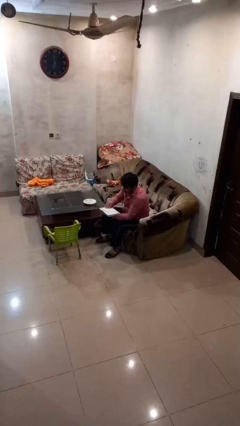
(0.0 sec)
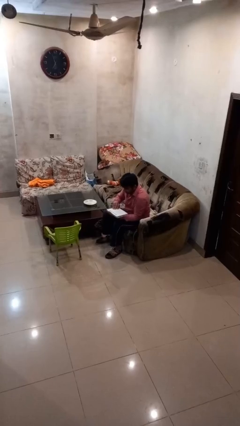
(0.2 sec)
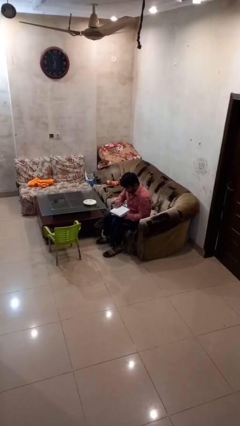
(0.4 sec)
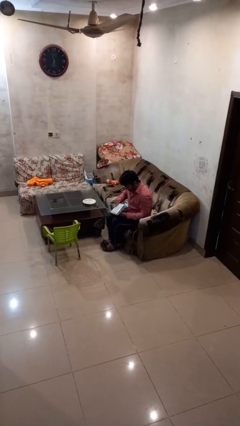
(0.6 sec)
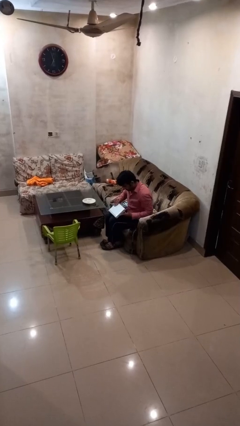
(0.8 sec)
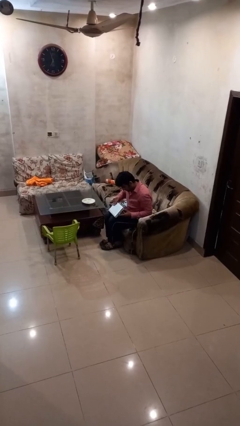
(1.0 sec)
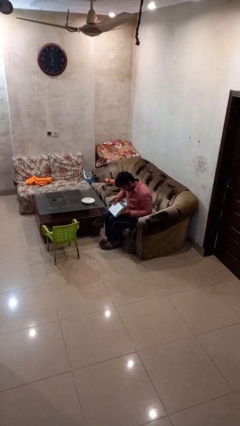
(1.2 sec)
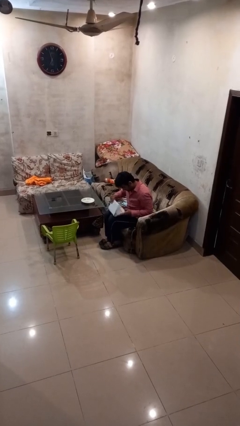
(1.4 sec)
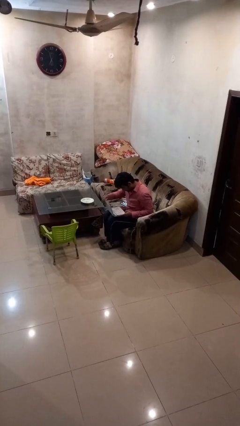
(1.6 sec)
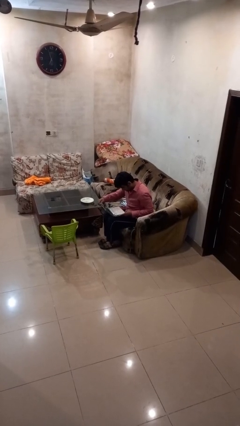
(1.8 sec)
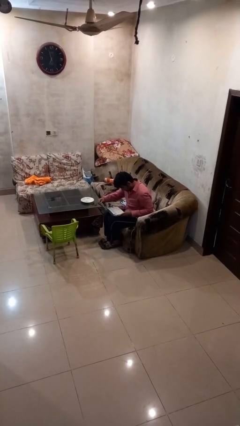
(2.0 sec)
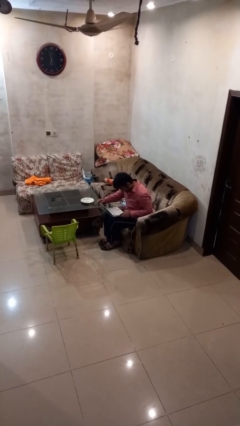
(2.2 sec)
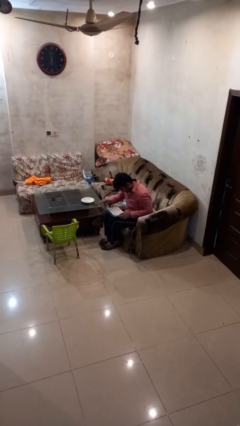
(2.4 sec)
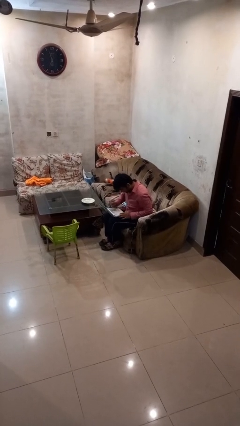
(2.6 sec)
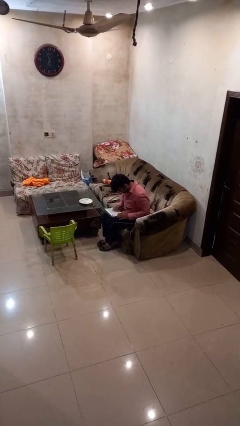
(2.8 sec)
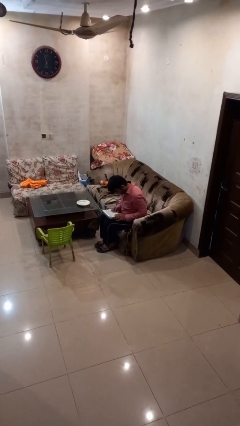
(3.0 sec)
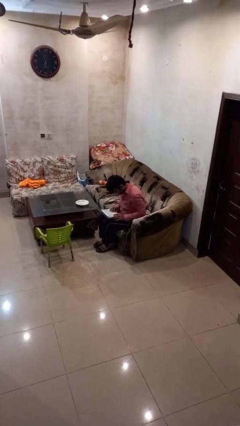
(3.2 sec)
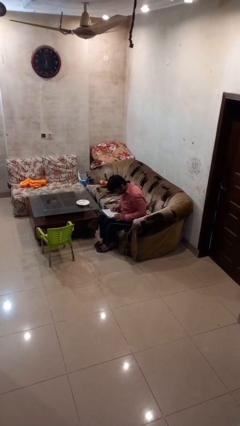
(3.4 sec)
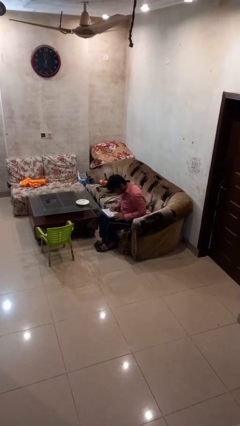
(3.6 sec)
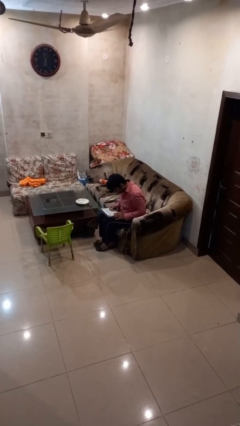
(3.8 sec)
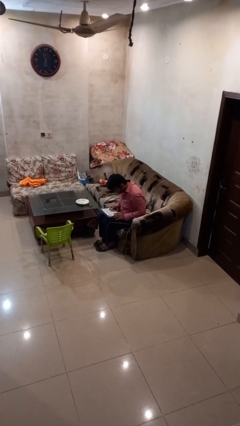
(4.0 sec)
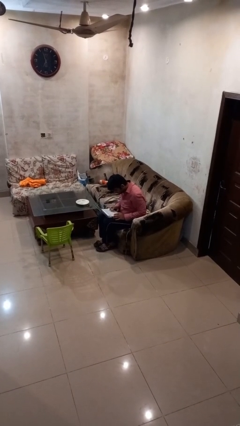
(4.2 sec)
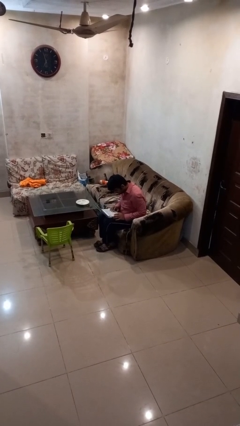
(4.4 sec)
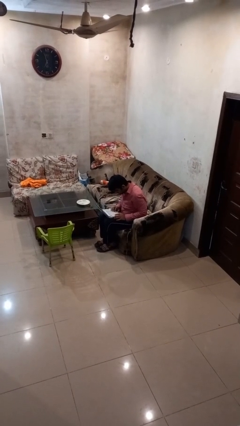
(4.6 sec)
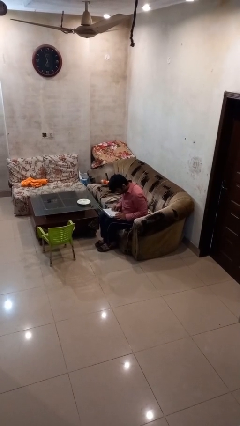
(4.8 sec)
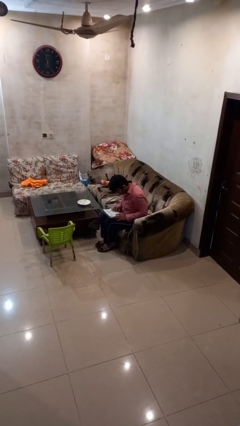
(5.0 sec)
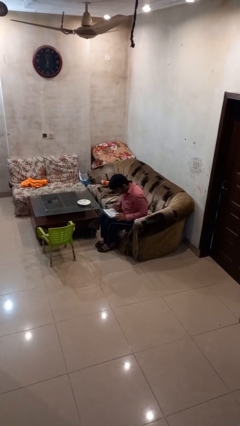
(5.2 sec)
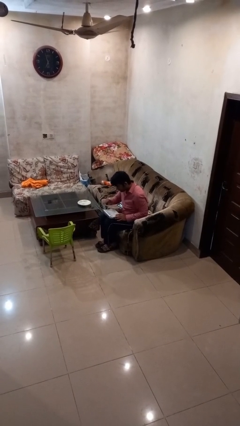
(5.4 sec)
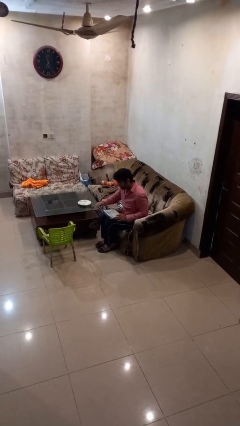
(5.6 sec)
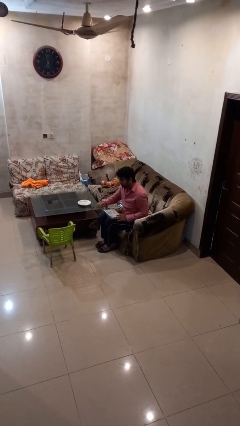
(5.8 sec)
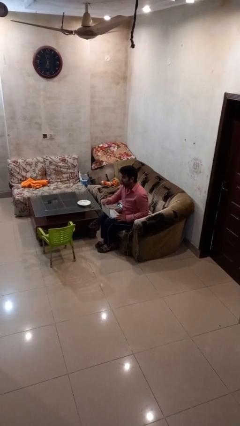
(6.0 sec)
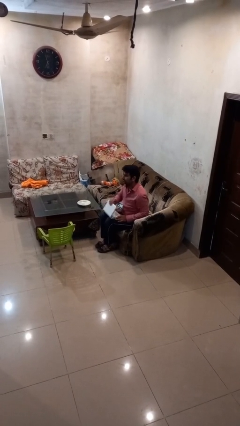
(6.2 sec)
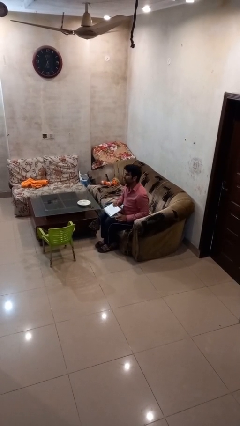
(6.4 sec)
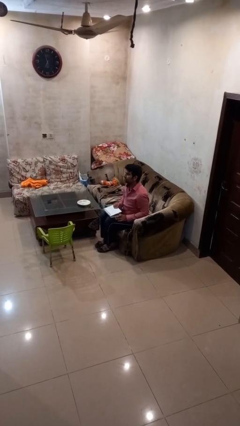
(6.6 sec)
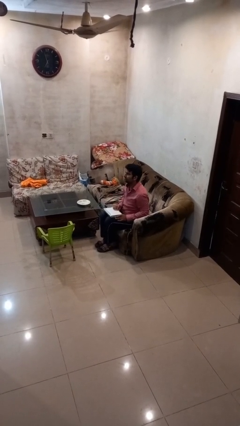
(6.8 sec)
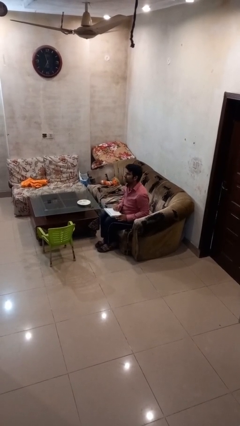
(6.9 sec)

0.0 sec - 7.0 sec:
person interacts with laptop

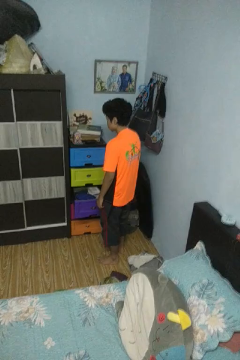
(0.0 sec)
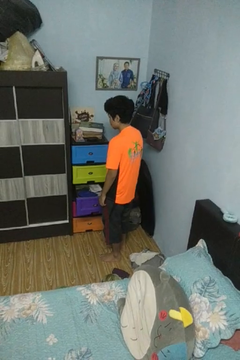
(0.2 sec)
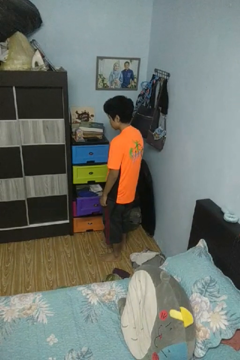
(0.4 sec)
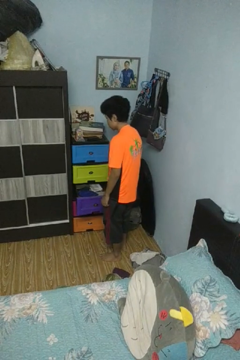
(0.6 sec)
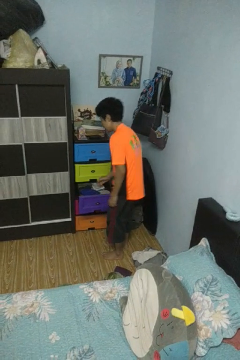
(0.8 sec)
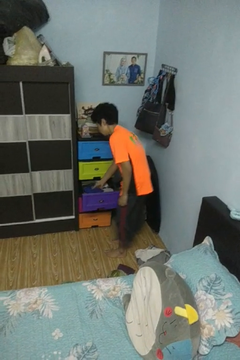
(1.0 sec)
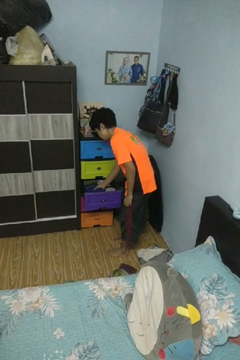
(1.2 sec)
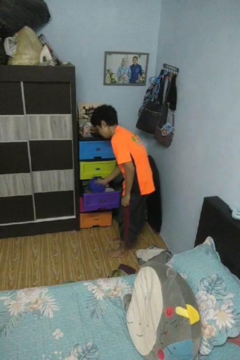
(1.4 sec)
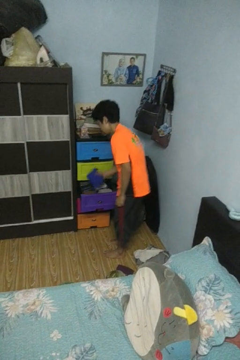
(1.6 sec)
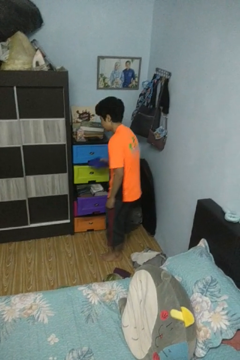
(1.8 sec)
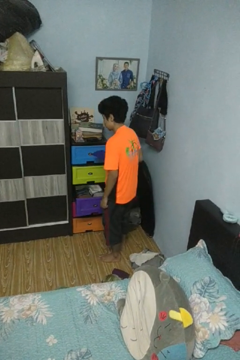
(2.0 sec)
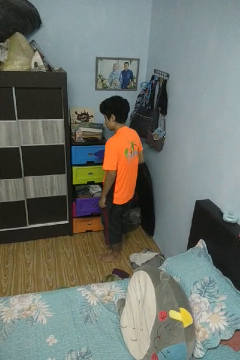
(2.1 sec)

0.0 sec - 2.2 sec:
person takes clothes from dresser

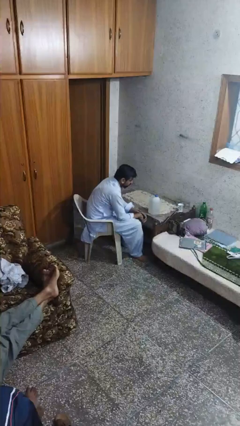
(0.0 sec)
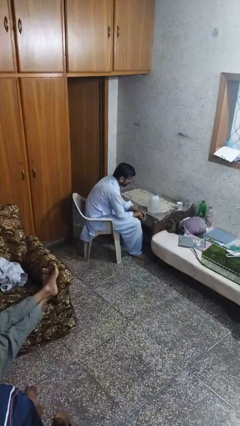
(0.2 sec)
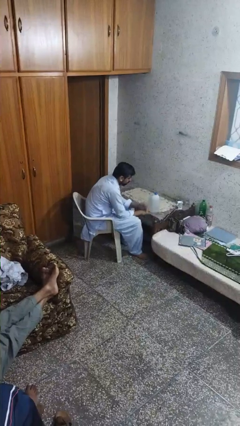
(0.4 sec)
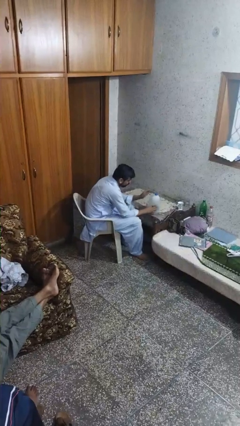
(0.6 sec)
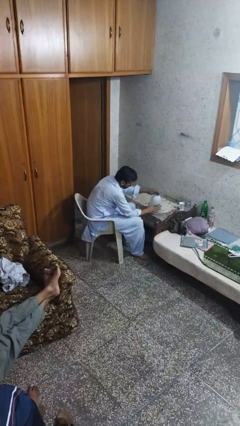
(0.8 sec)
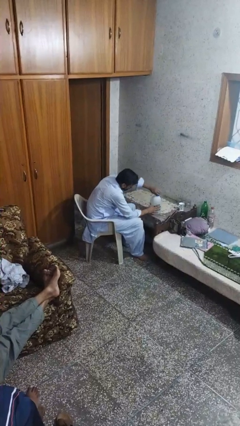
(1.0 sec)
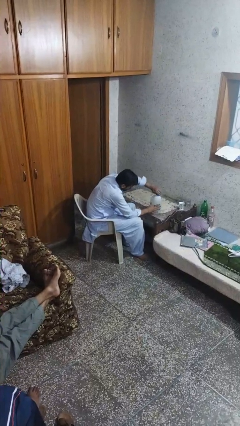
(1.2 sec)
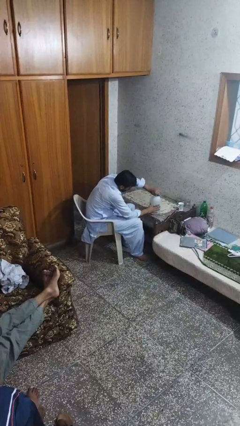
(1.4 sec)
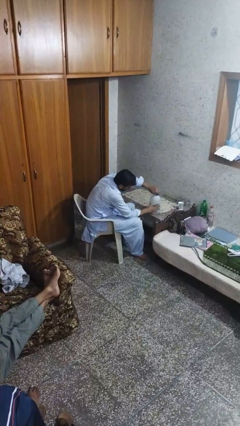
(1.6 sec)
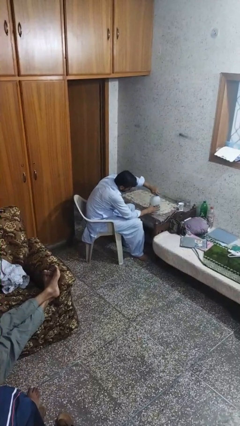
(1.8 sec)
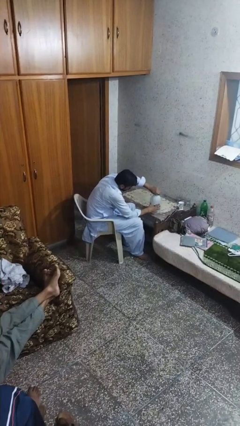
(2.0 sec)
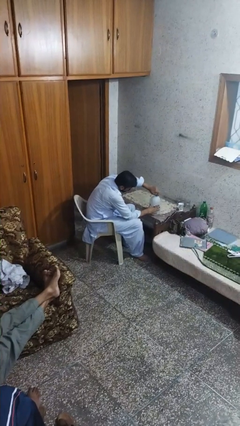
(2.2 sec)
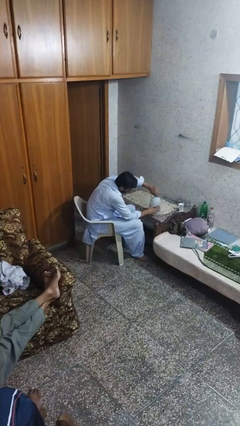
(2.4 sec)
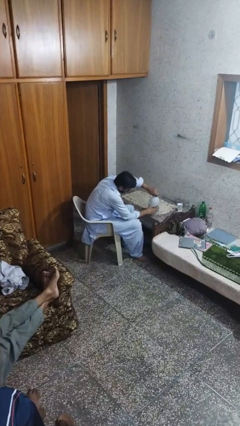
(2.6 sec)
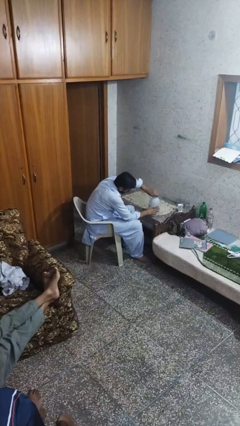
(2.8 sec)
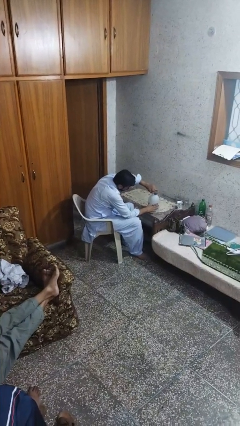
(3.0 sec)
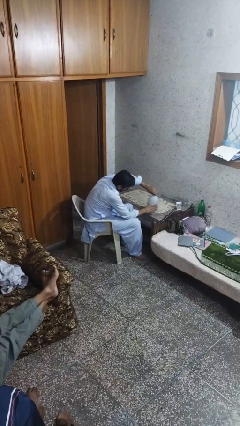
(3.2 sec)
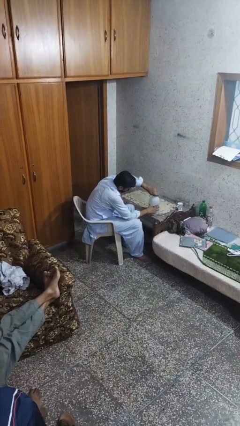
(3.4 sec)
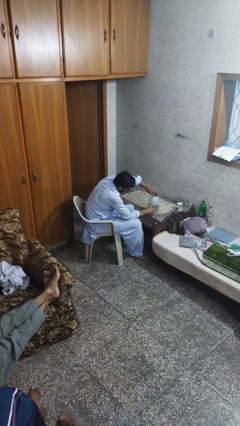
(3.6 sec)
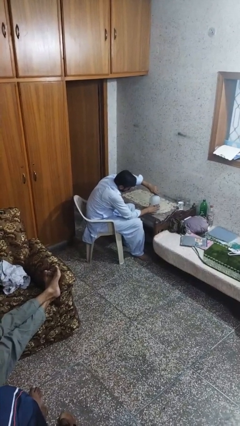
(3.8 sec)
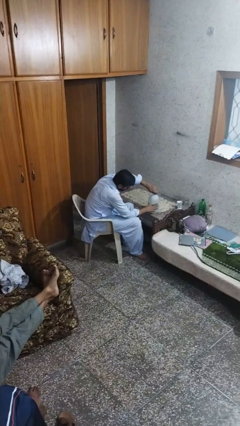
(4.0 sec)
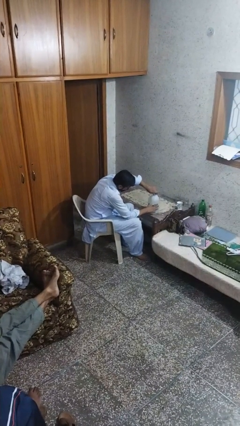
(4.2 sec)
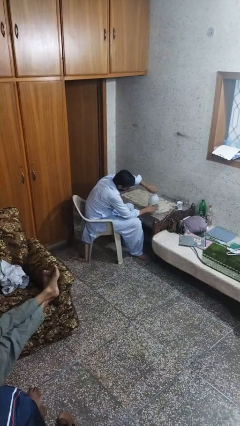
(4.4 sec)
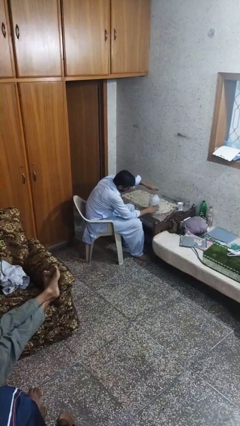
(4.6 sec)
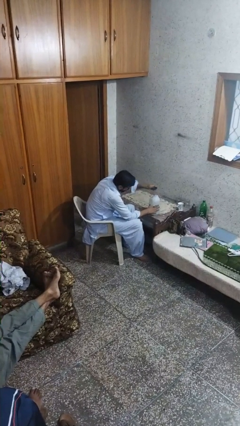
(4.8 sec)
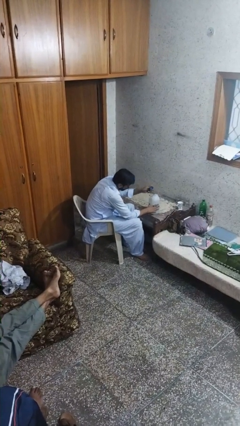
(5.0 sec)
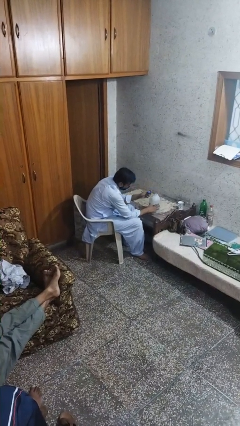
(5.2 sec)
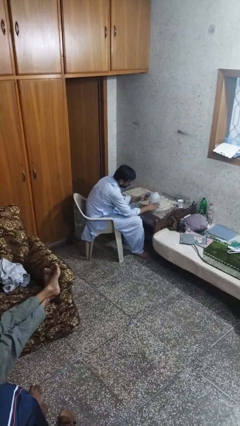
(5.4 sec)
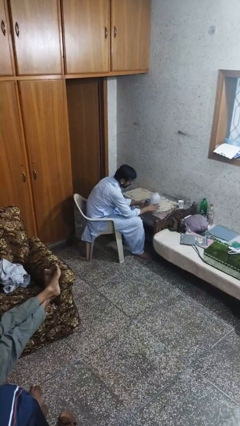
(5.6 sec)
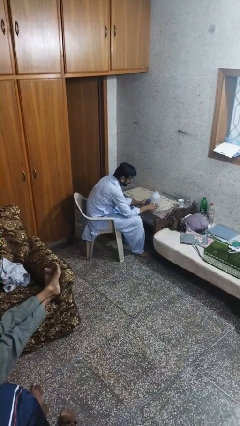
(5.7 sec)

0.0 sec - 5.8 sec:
person unscrews lid from bottle

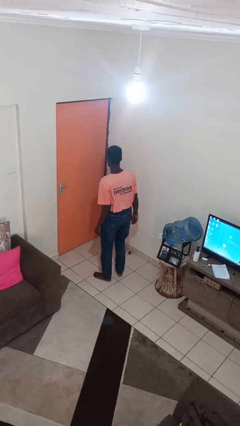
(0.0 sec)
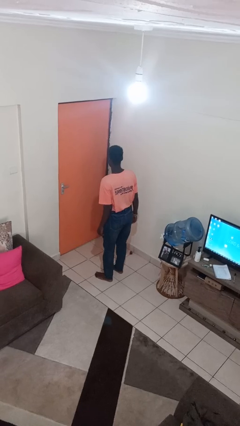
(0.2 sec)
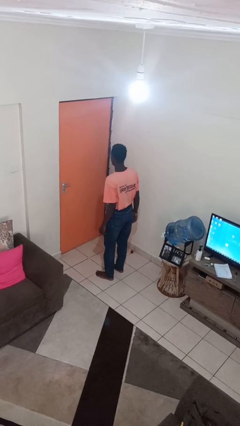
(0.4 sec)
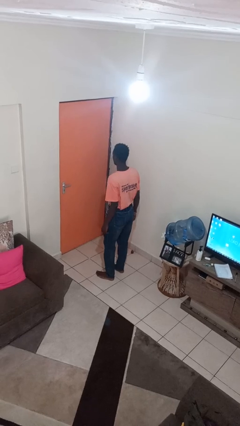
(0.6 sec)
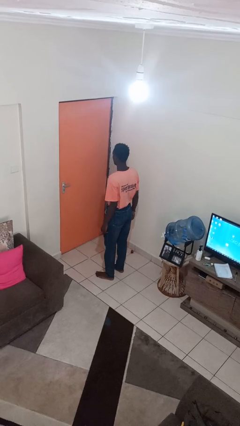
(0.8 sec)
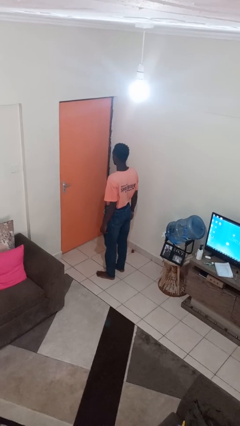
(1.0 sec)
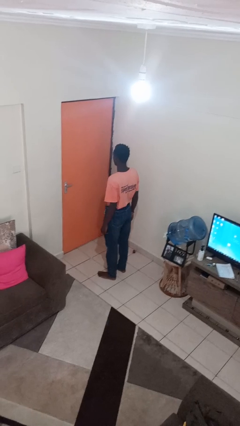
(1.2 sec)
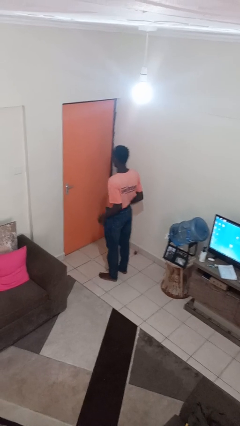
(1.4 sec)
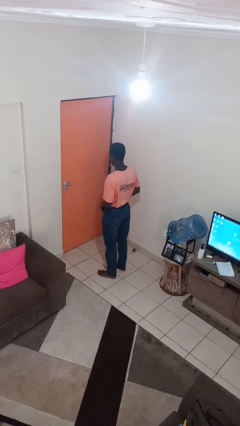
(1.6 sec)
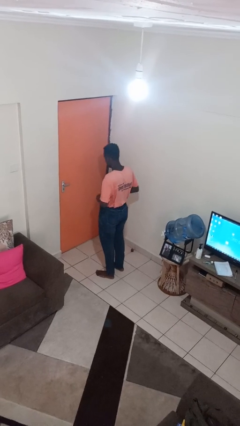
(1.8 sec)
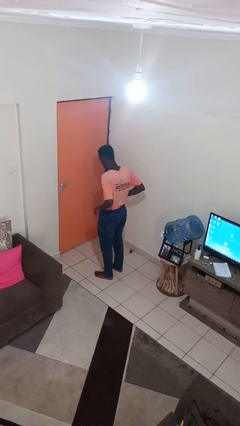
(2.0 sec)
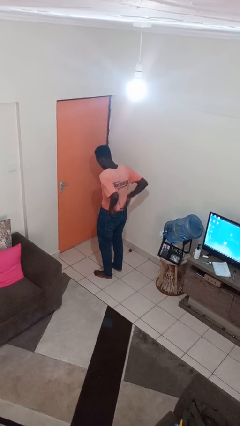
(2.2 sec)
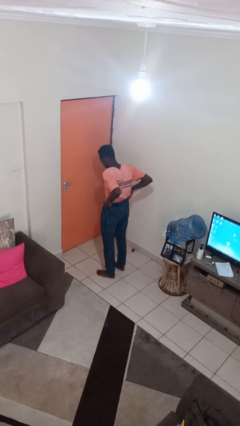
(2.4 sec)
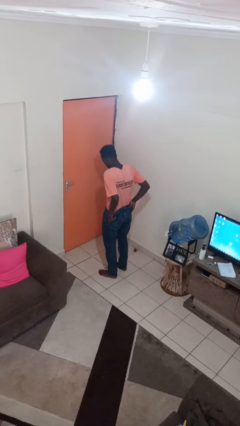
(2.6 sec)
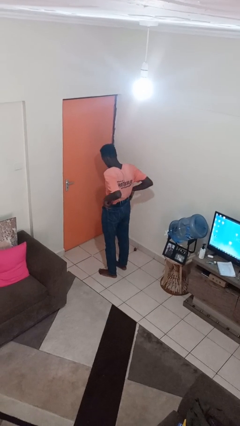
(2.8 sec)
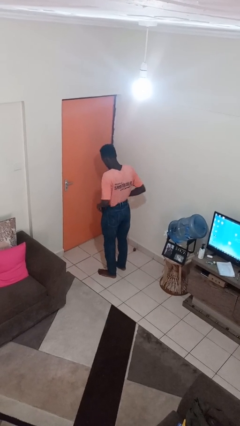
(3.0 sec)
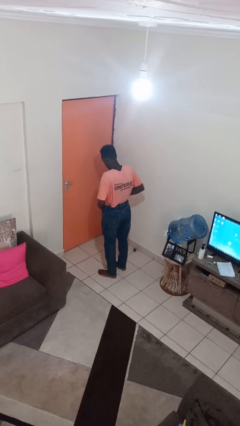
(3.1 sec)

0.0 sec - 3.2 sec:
person hikes up pants
